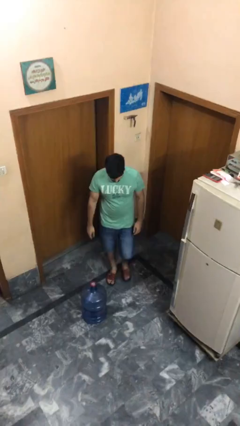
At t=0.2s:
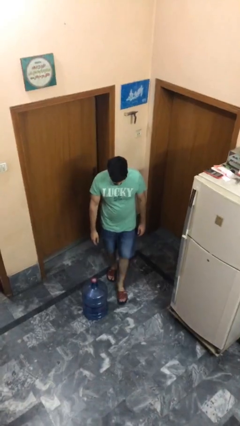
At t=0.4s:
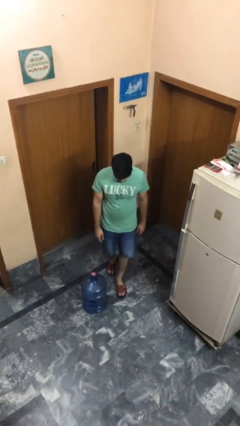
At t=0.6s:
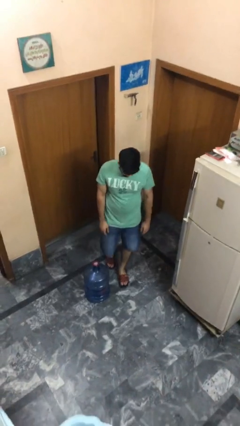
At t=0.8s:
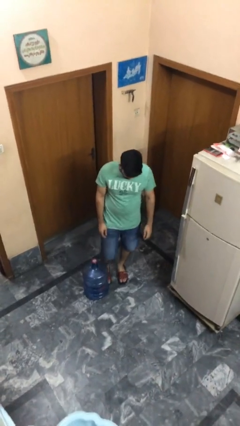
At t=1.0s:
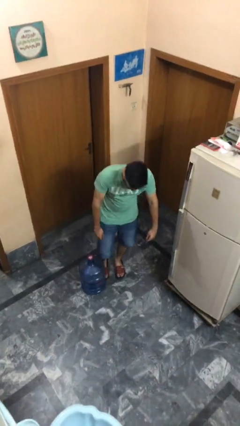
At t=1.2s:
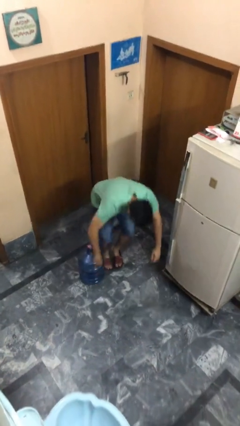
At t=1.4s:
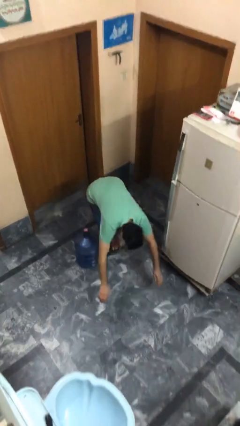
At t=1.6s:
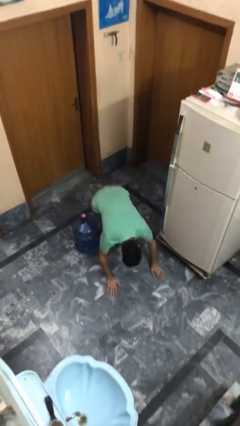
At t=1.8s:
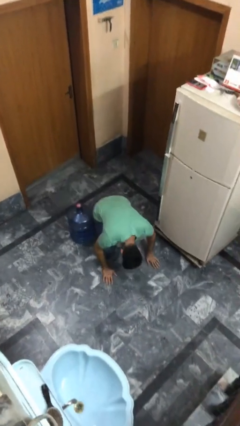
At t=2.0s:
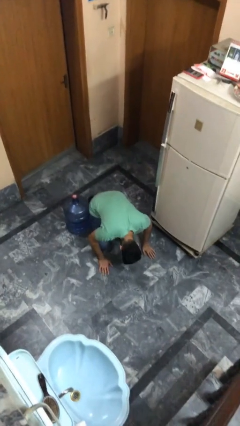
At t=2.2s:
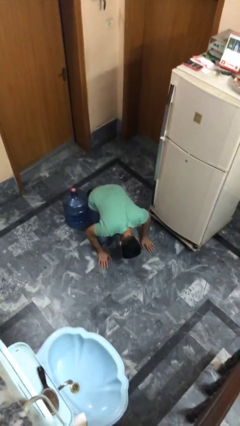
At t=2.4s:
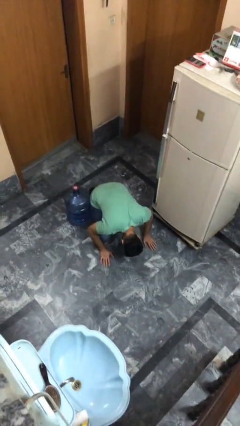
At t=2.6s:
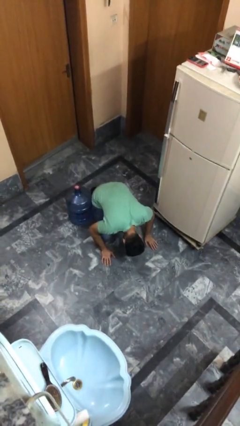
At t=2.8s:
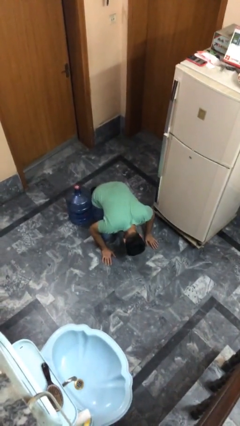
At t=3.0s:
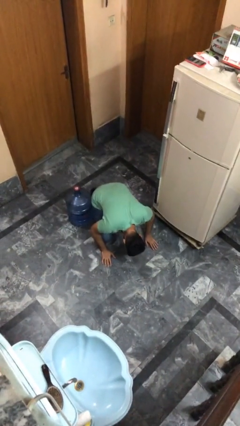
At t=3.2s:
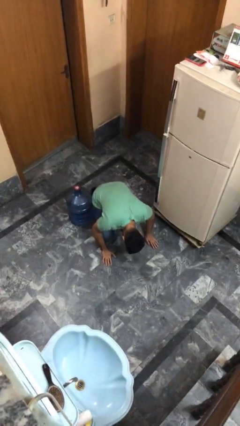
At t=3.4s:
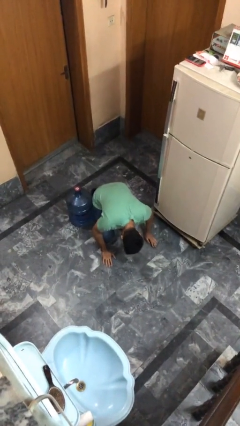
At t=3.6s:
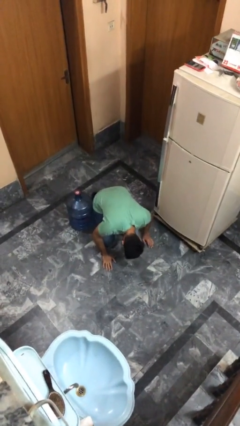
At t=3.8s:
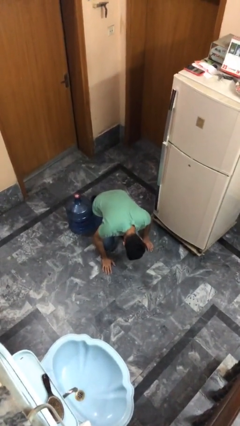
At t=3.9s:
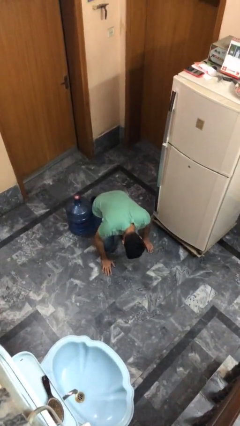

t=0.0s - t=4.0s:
person trips on object on floor

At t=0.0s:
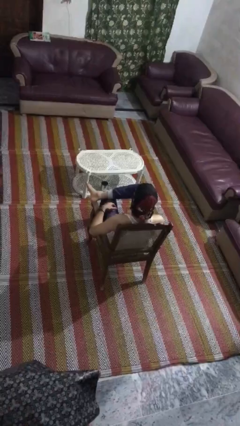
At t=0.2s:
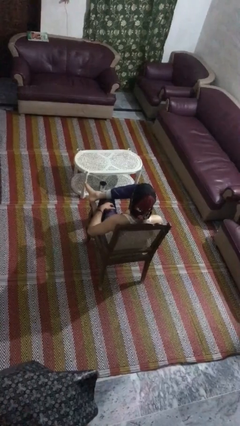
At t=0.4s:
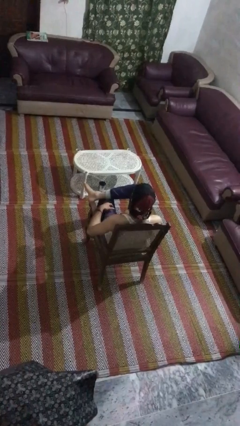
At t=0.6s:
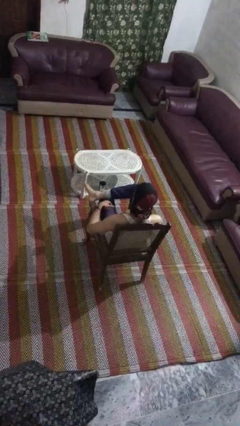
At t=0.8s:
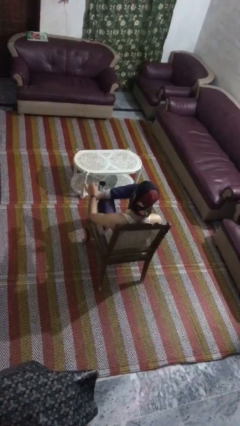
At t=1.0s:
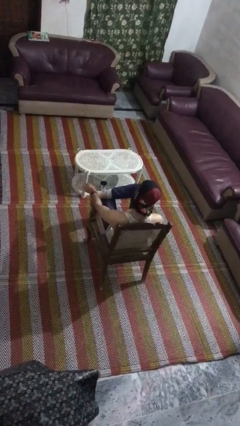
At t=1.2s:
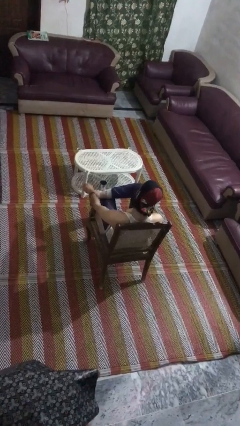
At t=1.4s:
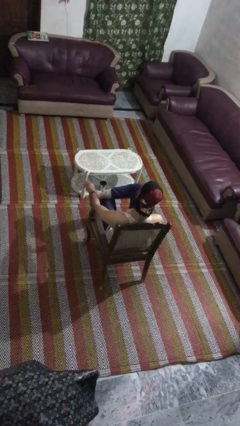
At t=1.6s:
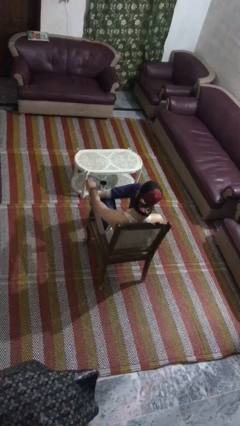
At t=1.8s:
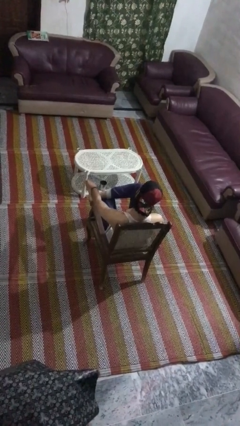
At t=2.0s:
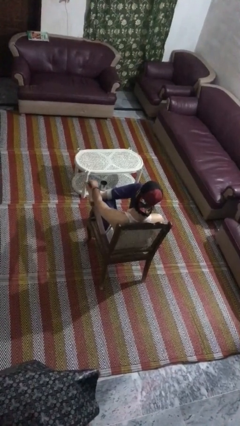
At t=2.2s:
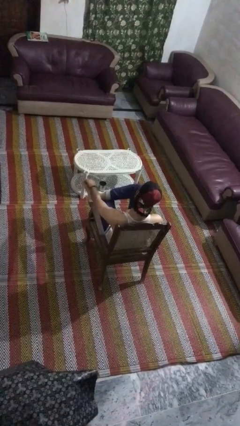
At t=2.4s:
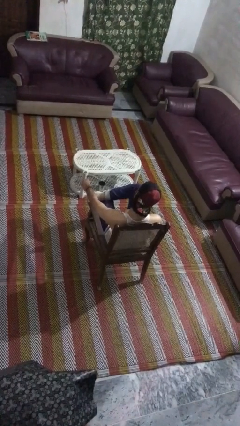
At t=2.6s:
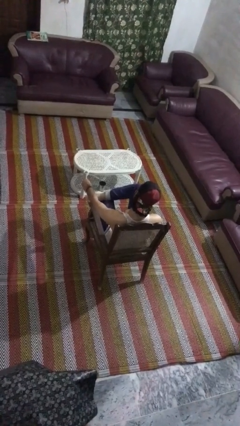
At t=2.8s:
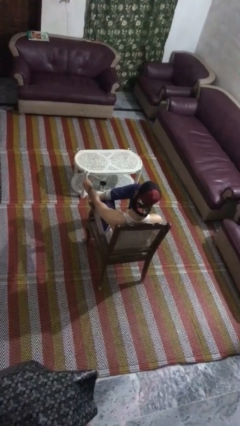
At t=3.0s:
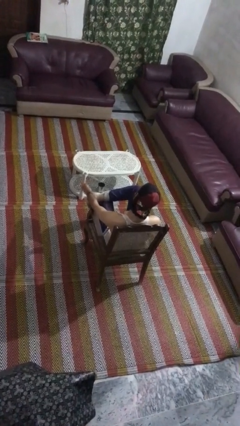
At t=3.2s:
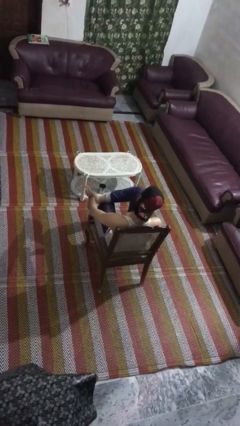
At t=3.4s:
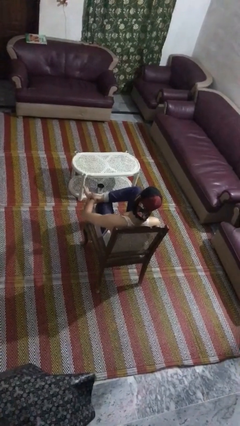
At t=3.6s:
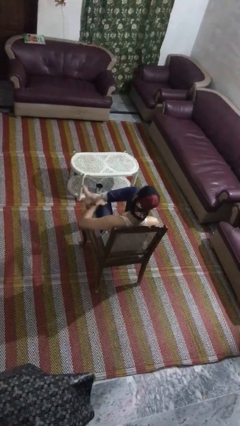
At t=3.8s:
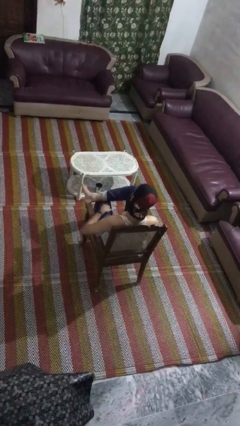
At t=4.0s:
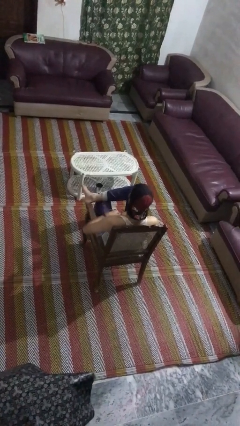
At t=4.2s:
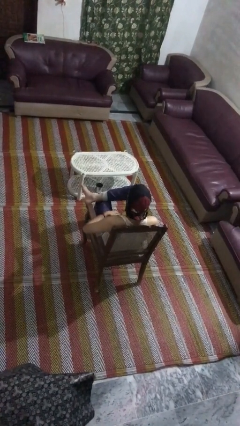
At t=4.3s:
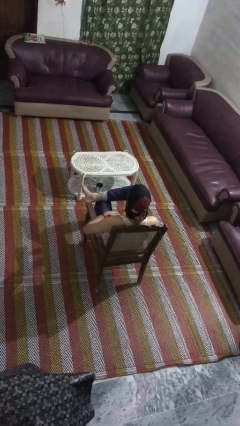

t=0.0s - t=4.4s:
person rubs foot

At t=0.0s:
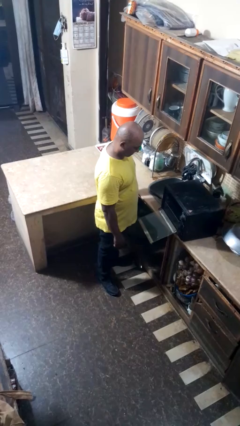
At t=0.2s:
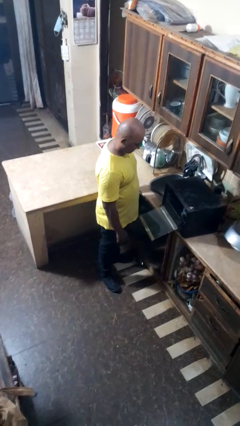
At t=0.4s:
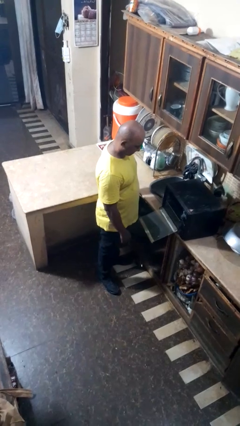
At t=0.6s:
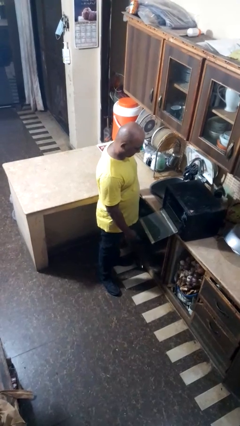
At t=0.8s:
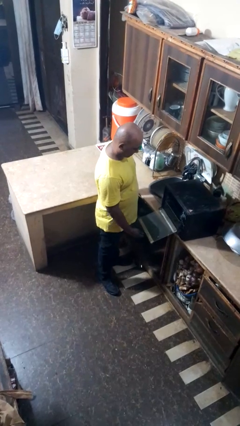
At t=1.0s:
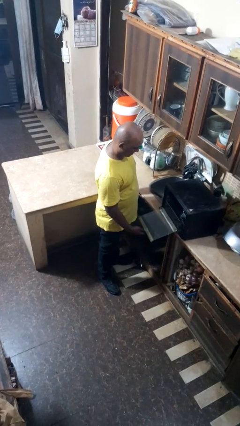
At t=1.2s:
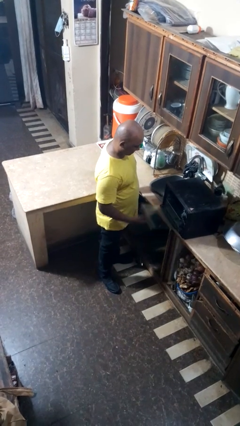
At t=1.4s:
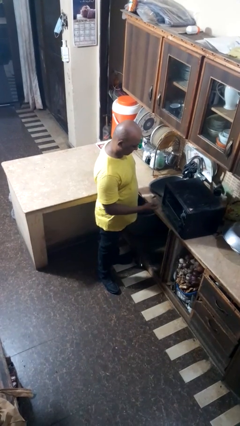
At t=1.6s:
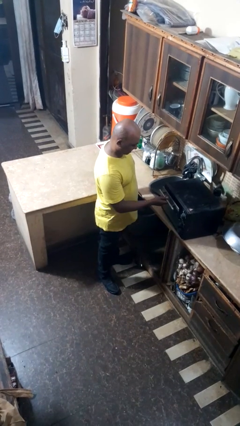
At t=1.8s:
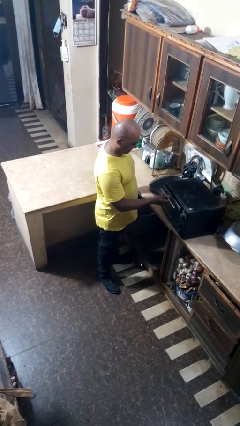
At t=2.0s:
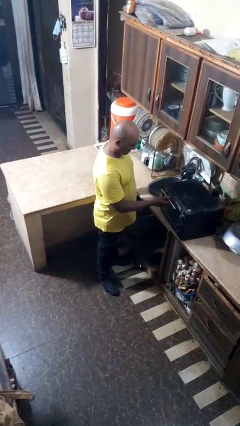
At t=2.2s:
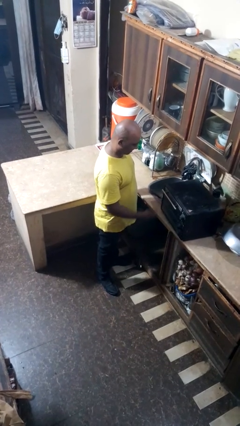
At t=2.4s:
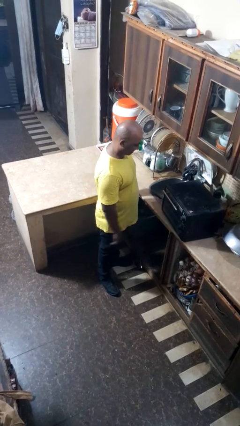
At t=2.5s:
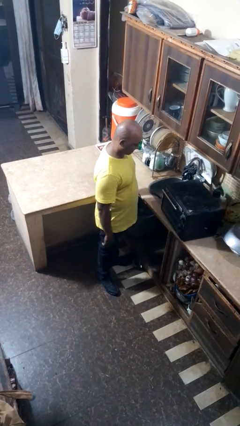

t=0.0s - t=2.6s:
person closes oven door

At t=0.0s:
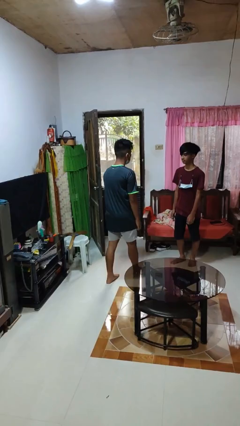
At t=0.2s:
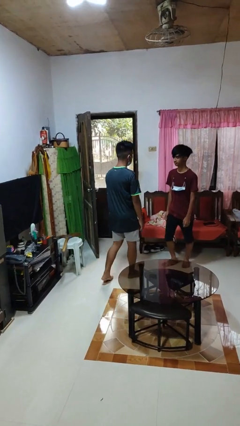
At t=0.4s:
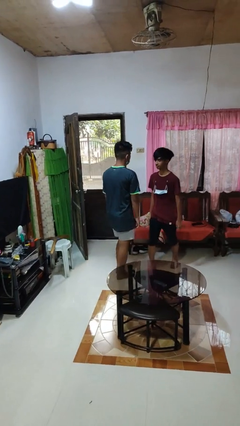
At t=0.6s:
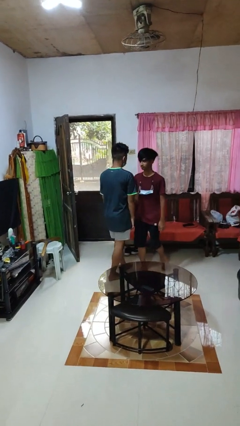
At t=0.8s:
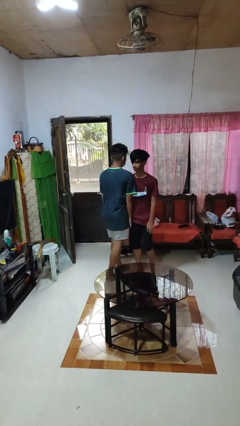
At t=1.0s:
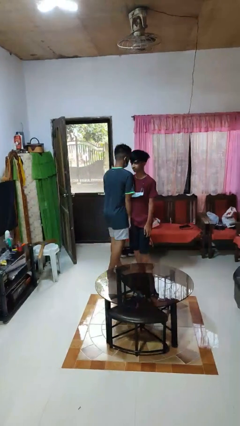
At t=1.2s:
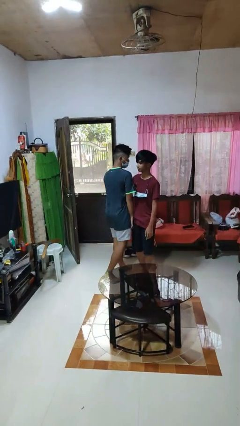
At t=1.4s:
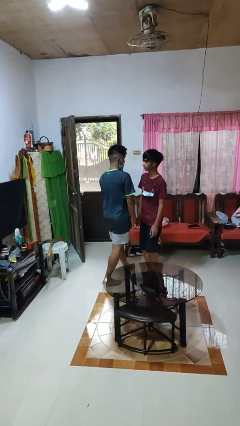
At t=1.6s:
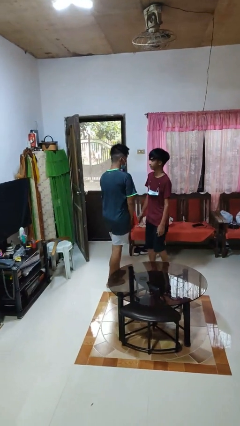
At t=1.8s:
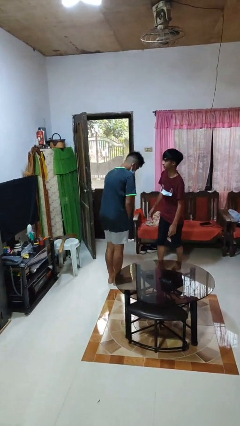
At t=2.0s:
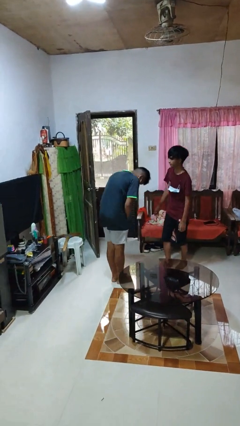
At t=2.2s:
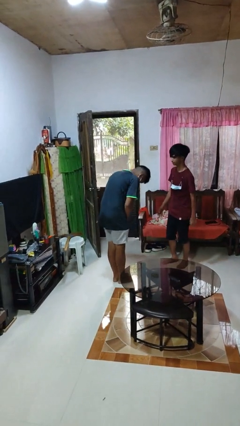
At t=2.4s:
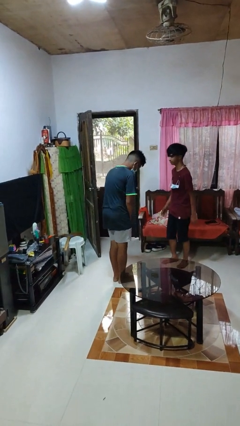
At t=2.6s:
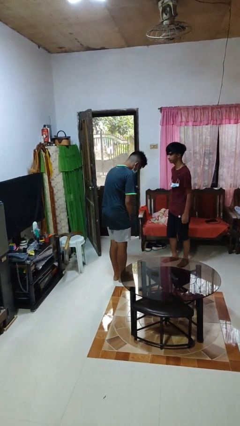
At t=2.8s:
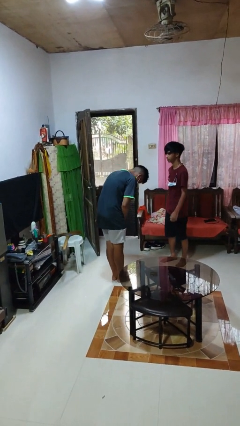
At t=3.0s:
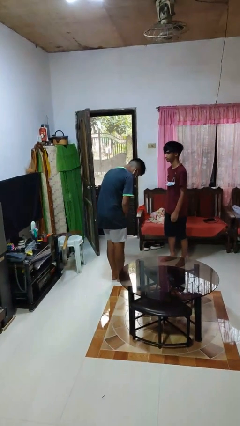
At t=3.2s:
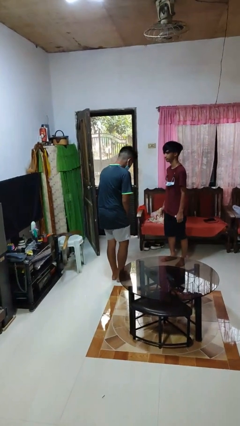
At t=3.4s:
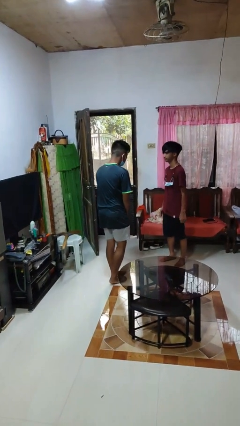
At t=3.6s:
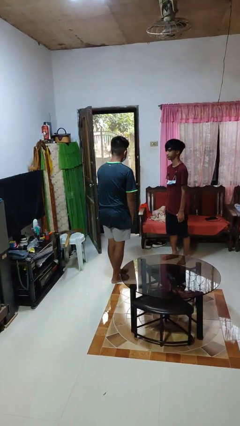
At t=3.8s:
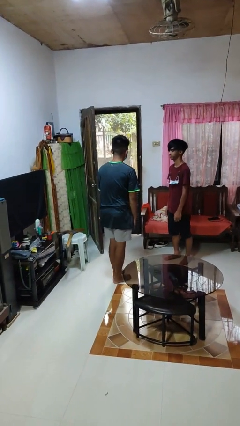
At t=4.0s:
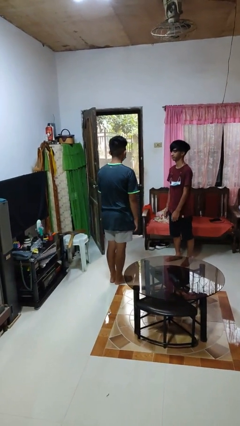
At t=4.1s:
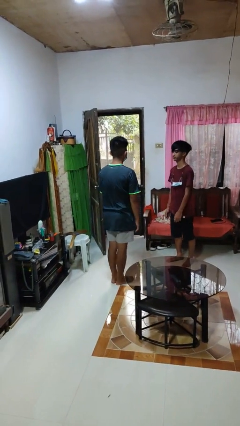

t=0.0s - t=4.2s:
person bumps into person

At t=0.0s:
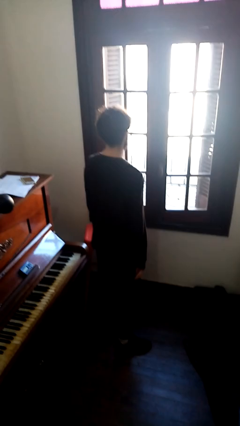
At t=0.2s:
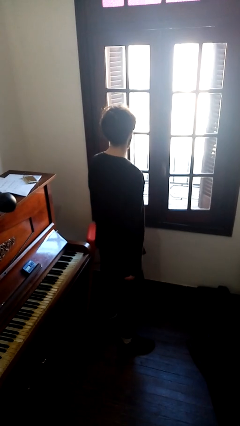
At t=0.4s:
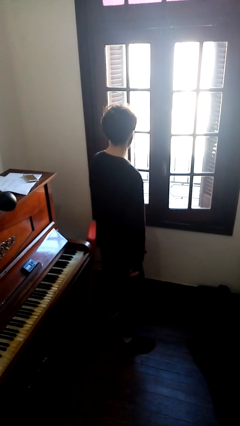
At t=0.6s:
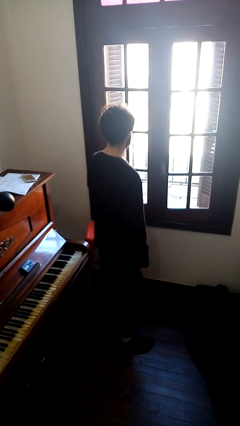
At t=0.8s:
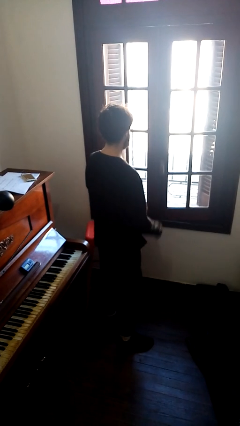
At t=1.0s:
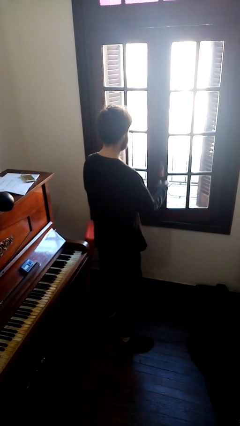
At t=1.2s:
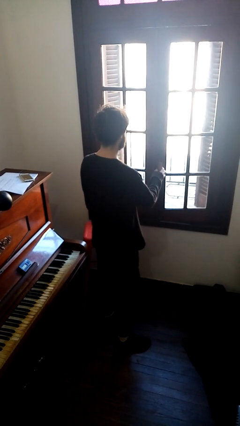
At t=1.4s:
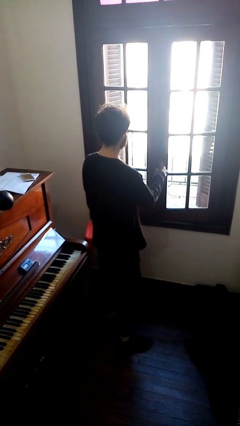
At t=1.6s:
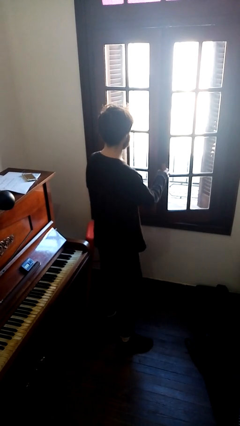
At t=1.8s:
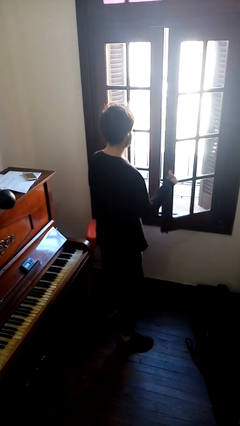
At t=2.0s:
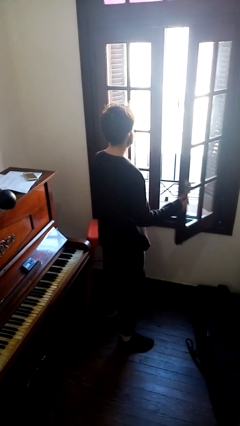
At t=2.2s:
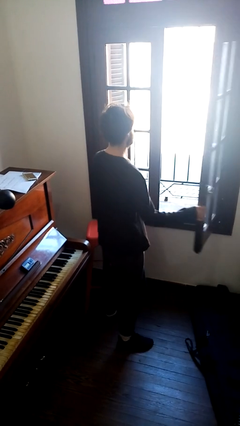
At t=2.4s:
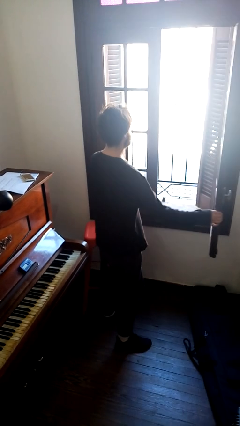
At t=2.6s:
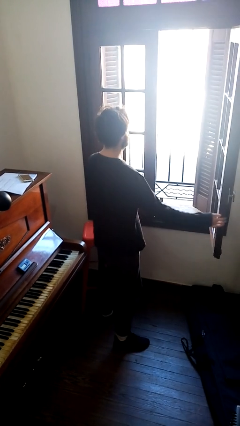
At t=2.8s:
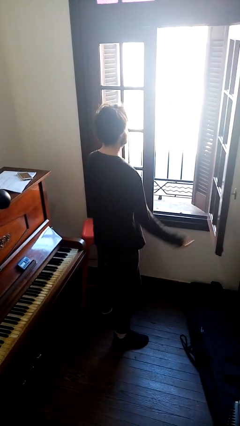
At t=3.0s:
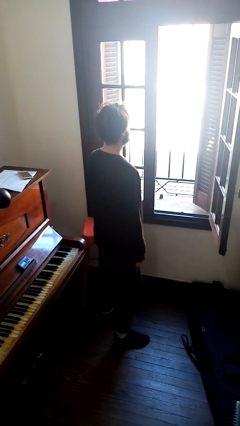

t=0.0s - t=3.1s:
person opens home window
